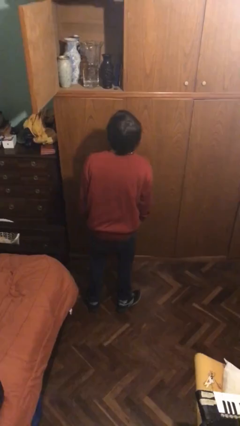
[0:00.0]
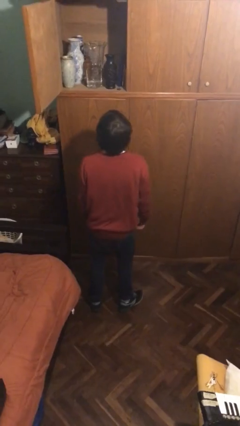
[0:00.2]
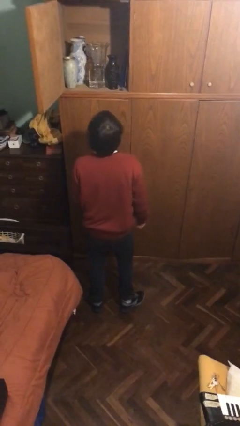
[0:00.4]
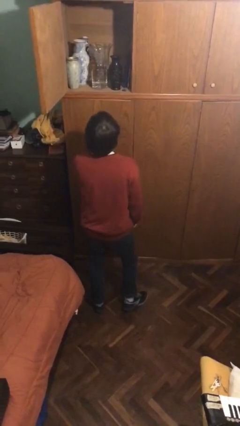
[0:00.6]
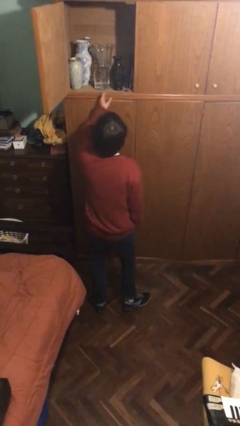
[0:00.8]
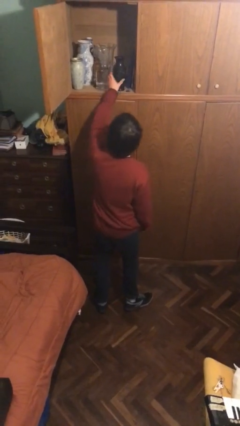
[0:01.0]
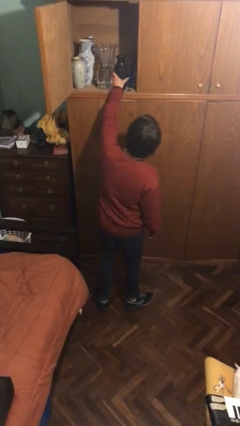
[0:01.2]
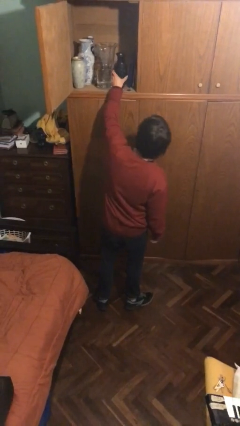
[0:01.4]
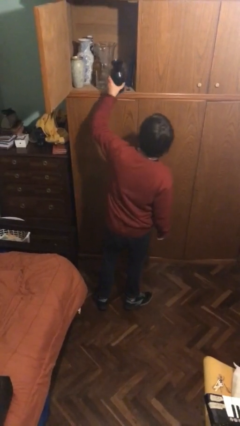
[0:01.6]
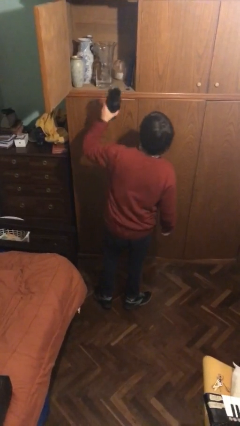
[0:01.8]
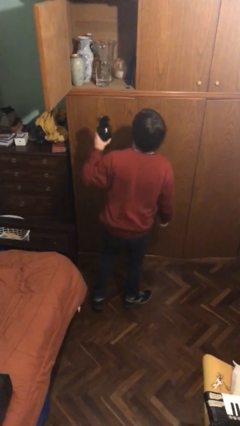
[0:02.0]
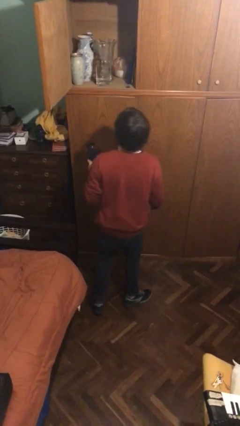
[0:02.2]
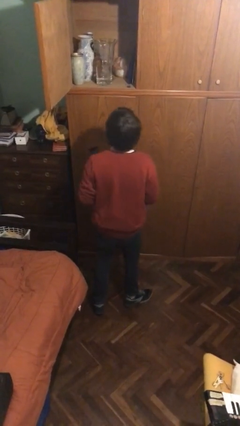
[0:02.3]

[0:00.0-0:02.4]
person picks up object from cabinet

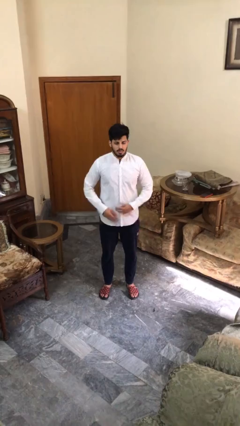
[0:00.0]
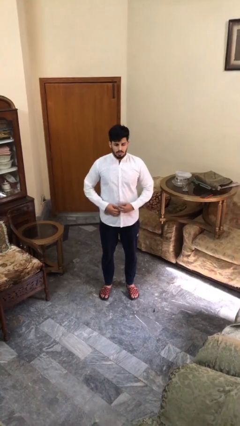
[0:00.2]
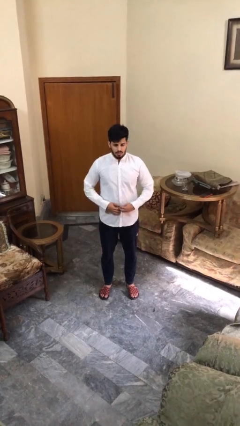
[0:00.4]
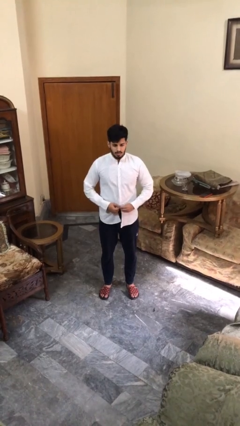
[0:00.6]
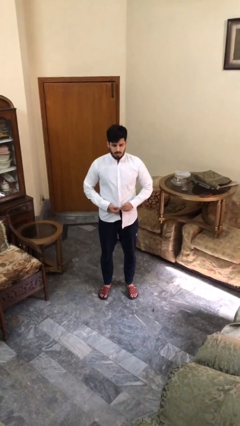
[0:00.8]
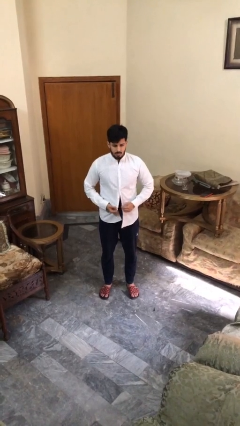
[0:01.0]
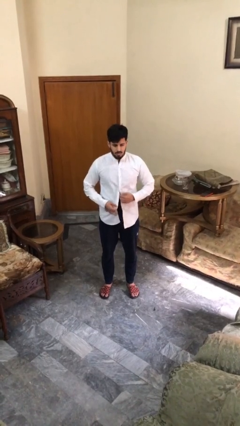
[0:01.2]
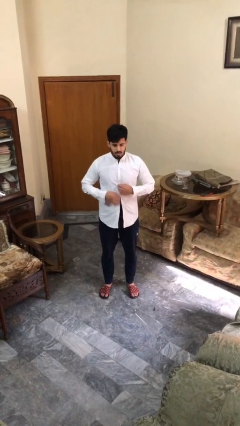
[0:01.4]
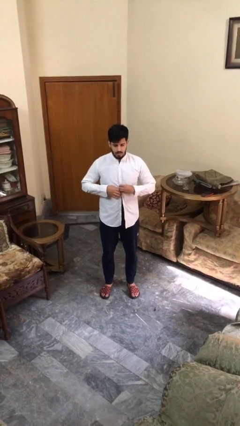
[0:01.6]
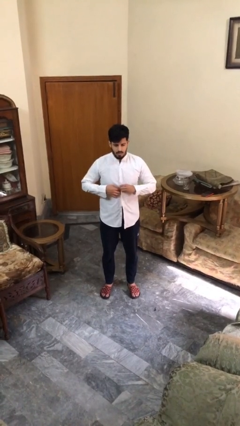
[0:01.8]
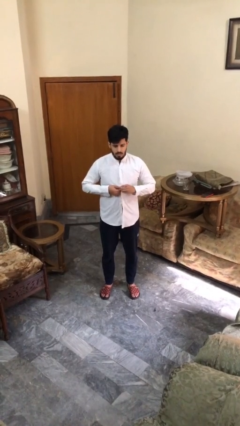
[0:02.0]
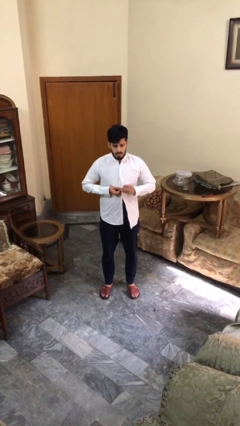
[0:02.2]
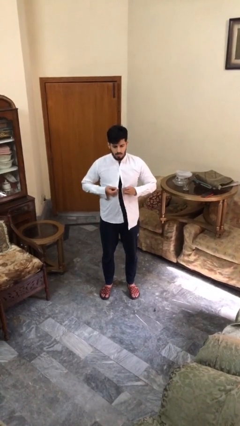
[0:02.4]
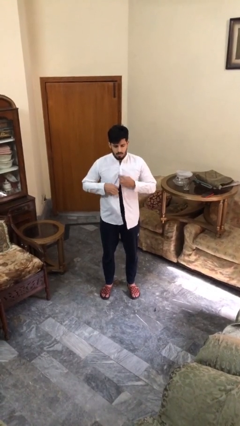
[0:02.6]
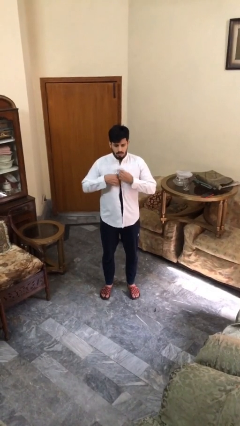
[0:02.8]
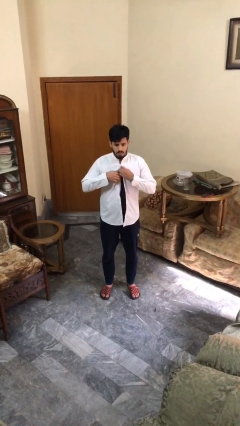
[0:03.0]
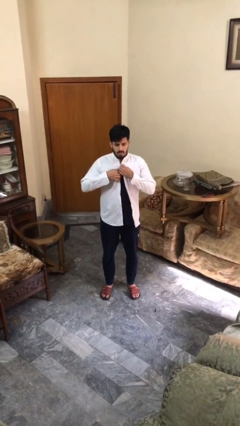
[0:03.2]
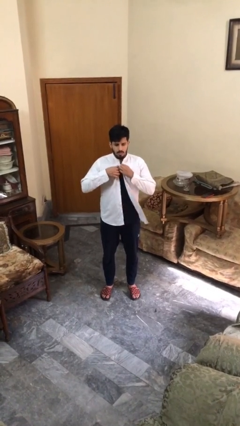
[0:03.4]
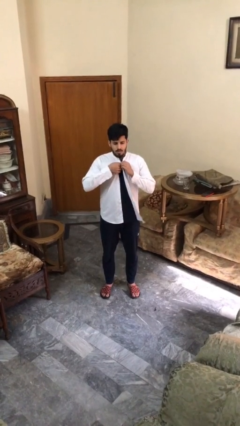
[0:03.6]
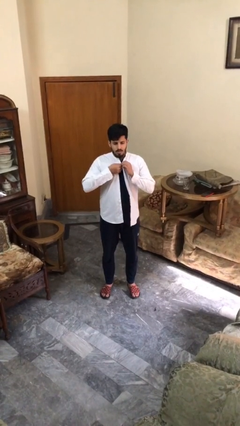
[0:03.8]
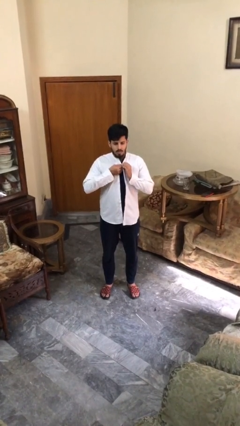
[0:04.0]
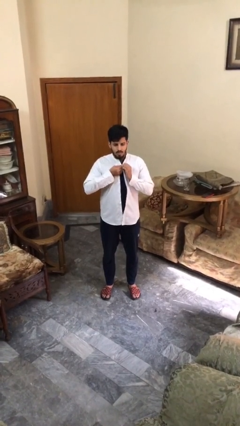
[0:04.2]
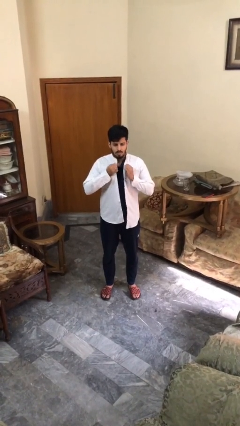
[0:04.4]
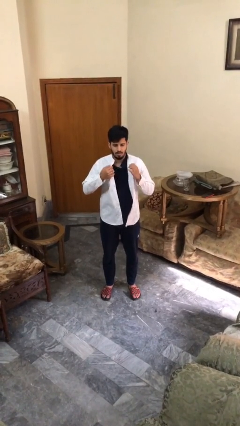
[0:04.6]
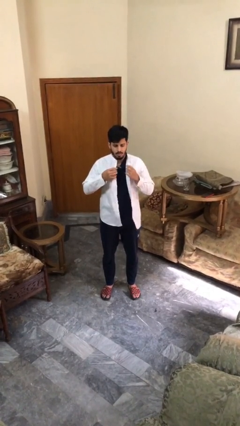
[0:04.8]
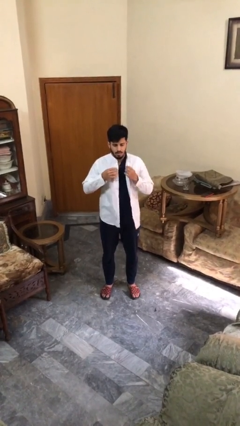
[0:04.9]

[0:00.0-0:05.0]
person unbuttons shirt

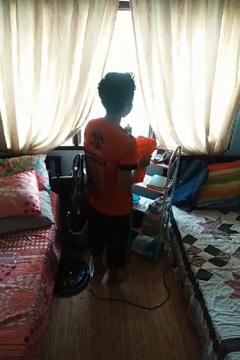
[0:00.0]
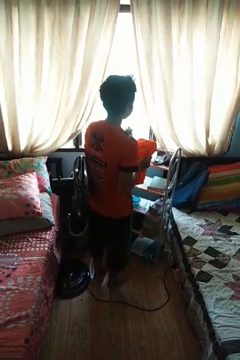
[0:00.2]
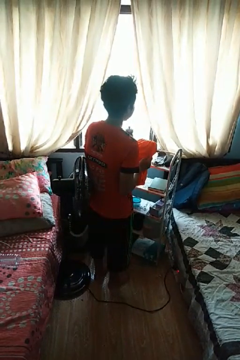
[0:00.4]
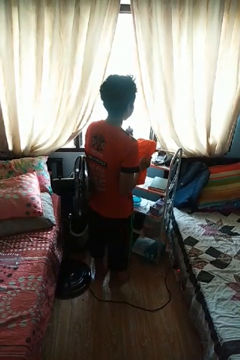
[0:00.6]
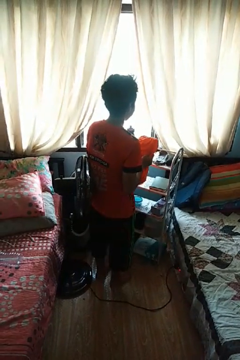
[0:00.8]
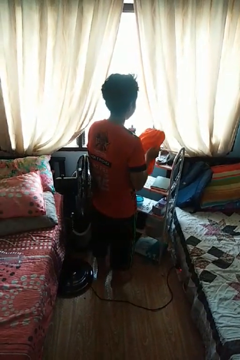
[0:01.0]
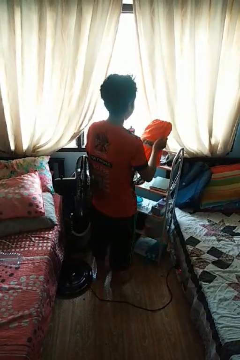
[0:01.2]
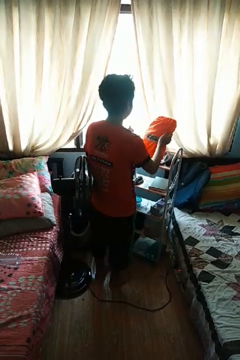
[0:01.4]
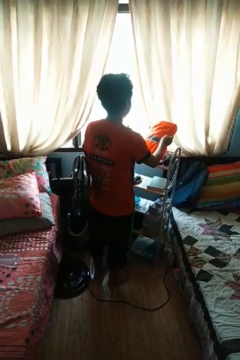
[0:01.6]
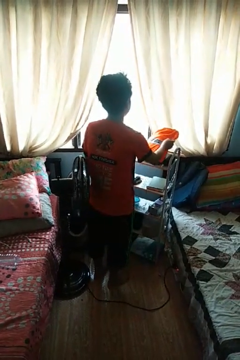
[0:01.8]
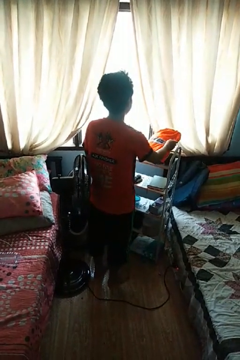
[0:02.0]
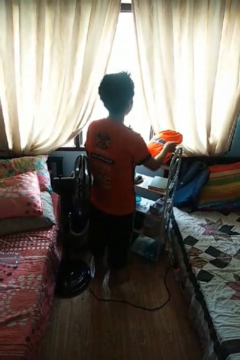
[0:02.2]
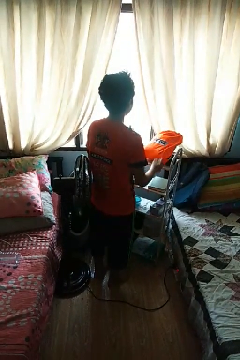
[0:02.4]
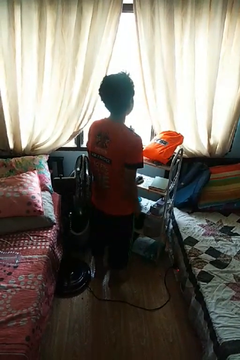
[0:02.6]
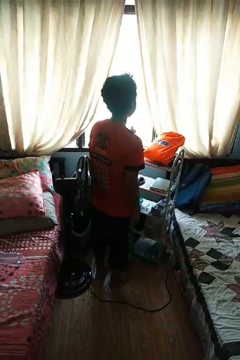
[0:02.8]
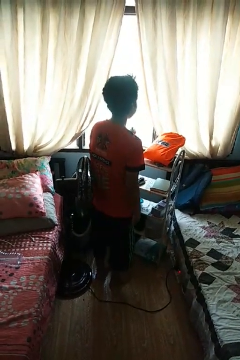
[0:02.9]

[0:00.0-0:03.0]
person puts down object on countertop

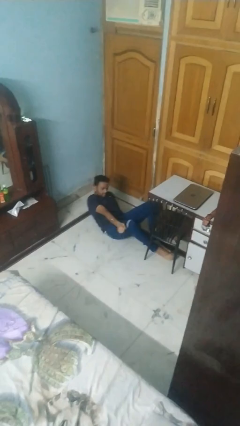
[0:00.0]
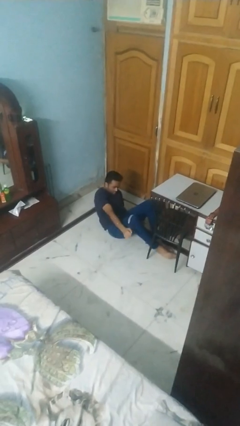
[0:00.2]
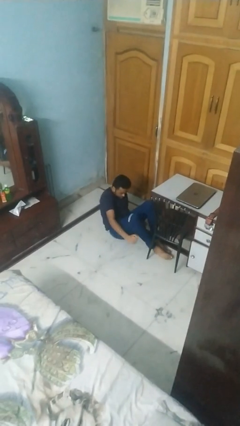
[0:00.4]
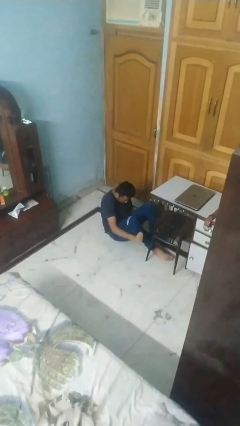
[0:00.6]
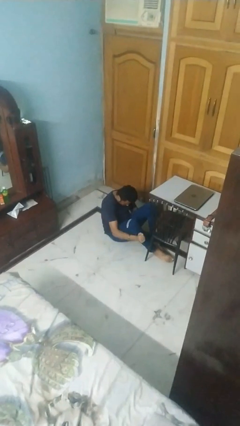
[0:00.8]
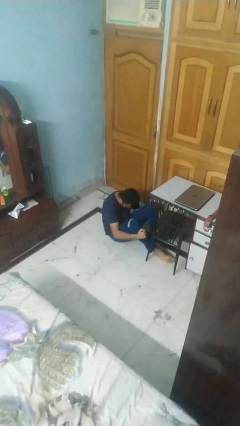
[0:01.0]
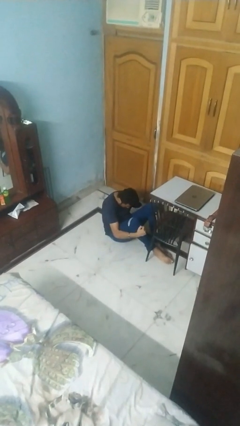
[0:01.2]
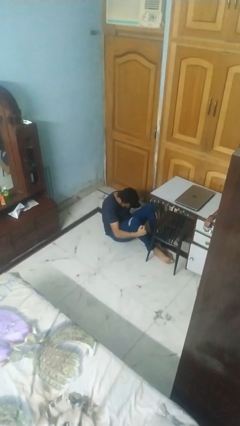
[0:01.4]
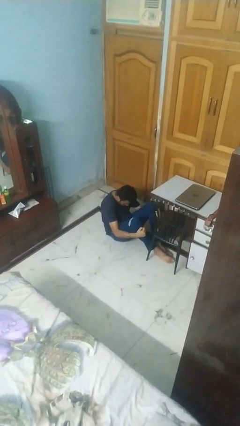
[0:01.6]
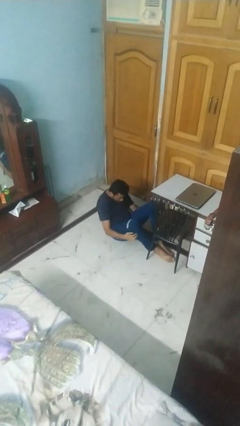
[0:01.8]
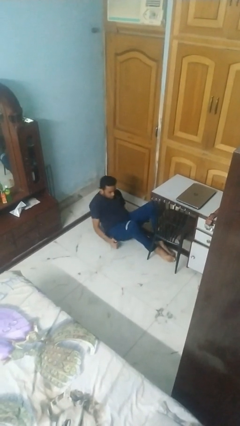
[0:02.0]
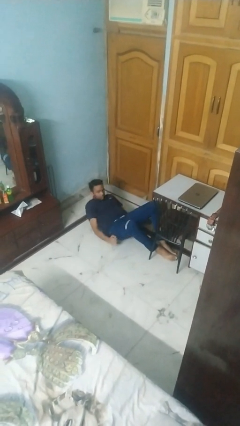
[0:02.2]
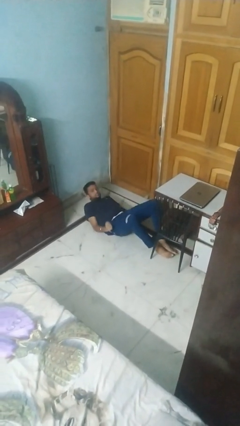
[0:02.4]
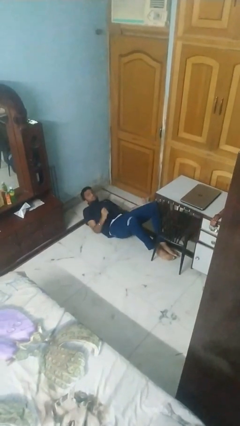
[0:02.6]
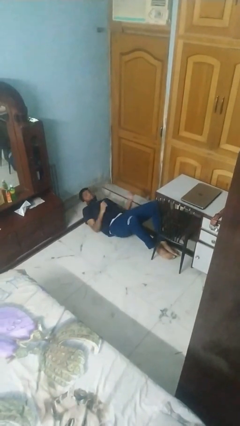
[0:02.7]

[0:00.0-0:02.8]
person exercises with situp

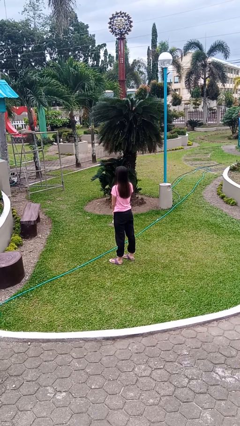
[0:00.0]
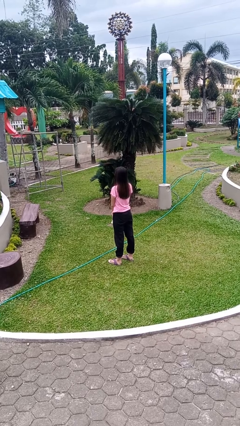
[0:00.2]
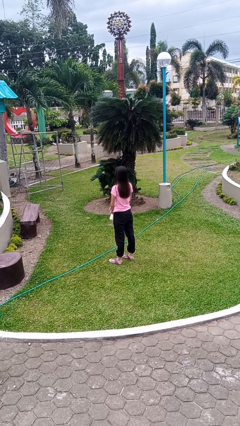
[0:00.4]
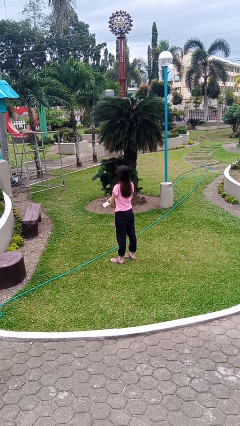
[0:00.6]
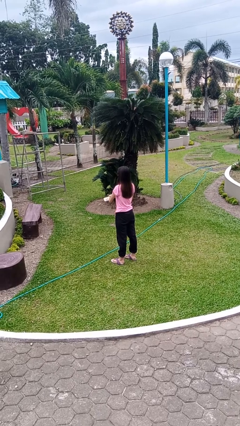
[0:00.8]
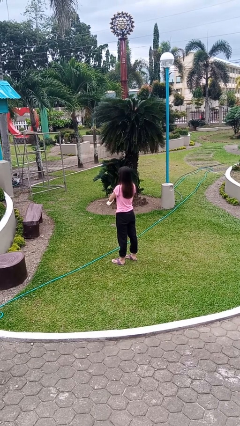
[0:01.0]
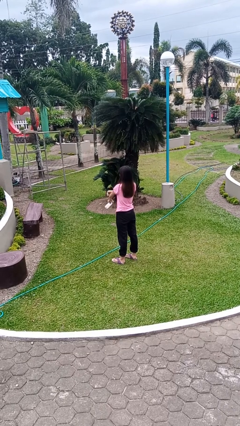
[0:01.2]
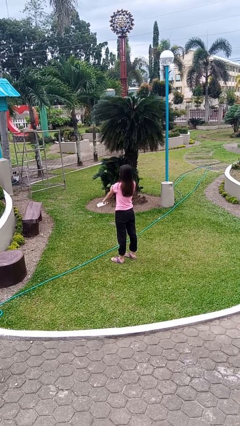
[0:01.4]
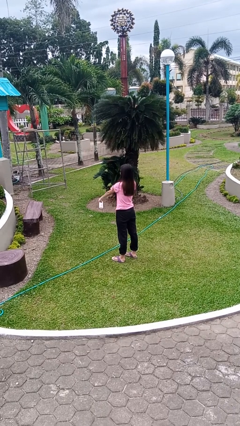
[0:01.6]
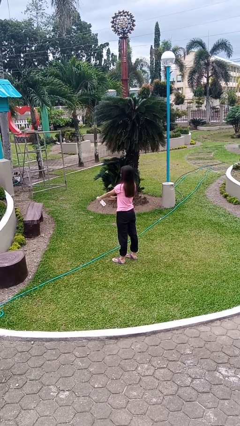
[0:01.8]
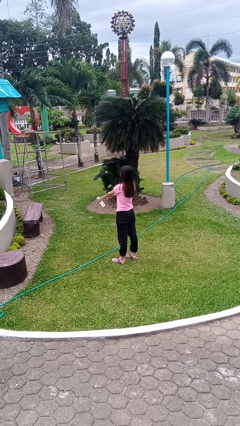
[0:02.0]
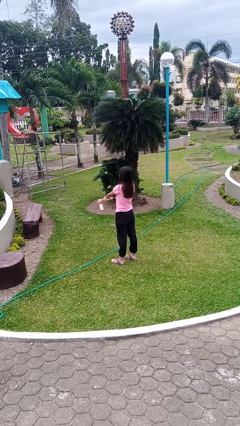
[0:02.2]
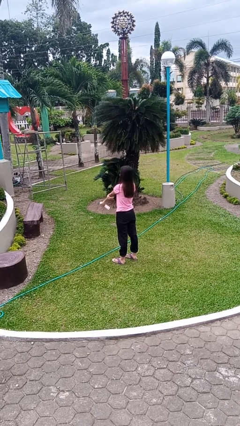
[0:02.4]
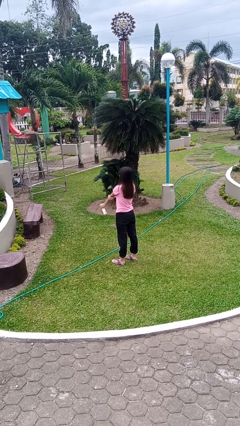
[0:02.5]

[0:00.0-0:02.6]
person applies sunscreen

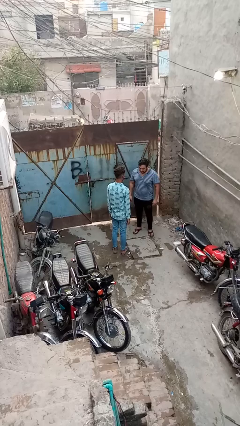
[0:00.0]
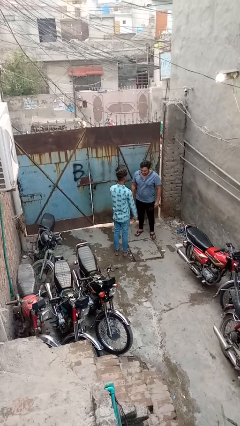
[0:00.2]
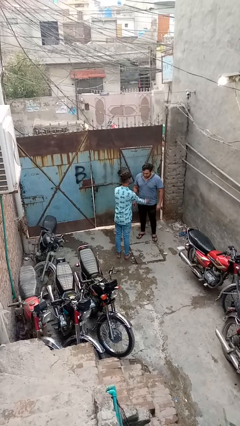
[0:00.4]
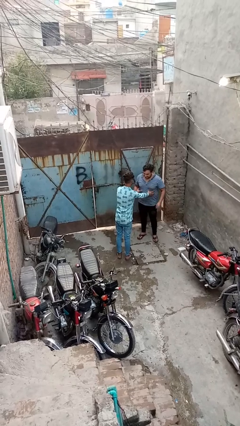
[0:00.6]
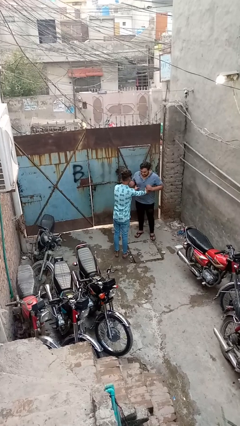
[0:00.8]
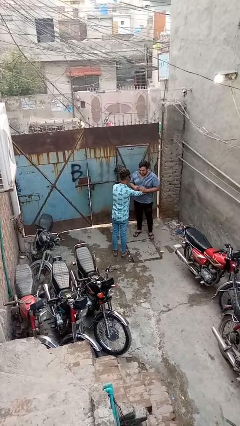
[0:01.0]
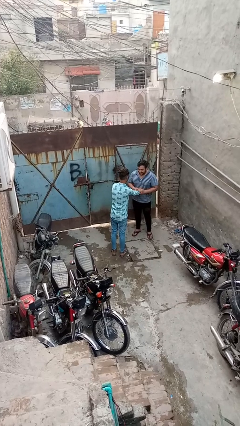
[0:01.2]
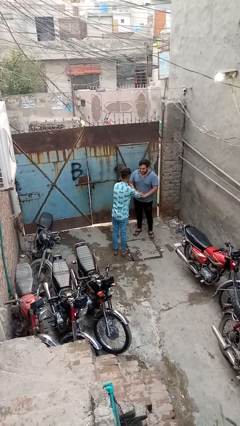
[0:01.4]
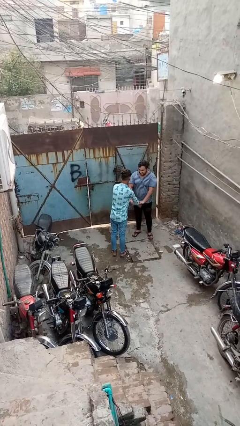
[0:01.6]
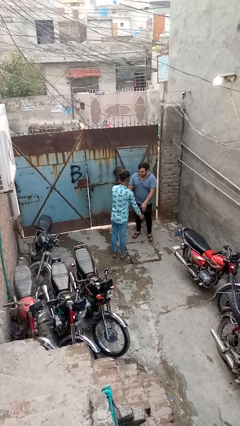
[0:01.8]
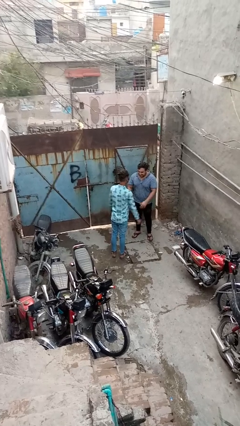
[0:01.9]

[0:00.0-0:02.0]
person tickles person

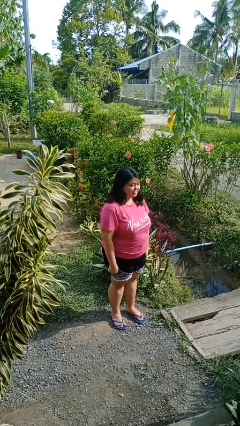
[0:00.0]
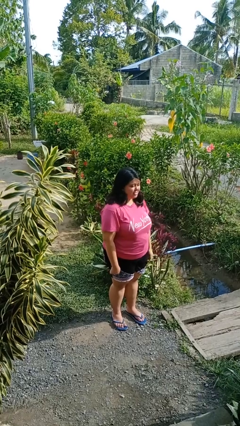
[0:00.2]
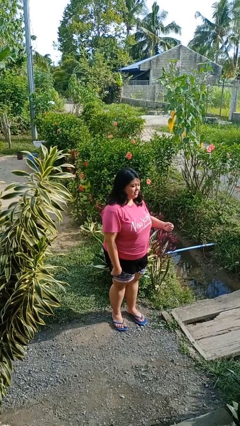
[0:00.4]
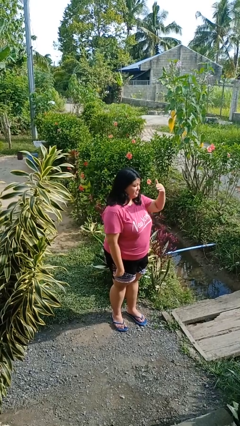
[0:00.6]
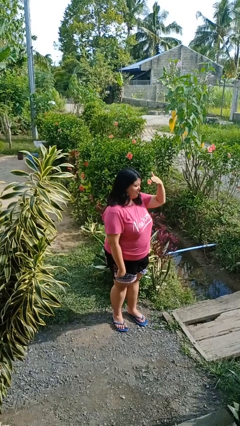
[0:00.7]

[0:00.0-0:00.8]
person shades eyes
